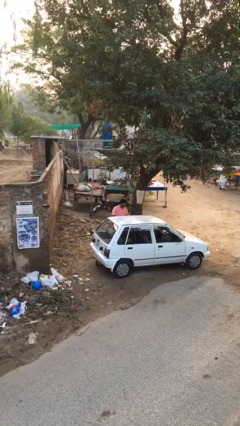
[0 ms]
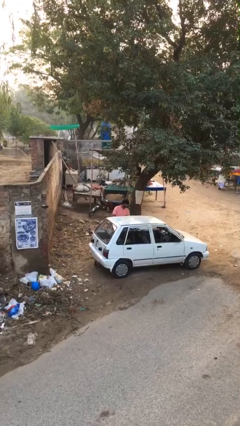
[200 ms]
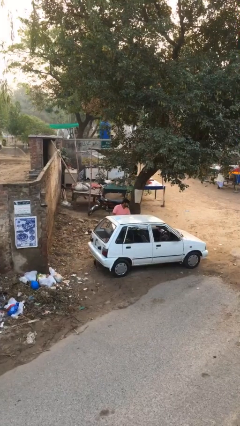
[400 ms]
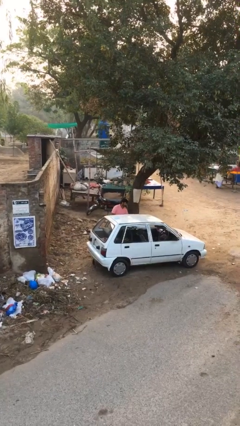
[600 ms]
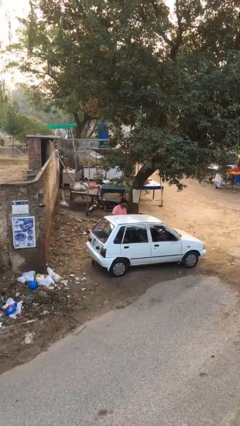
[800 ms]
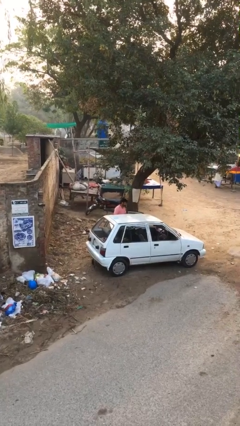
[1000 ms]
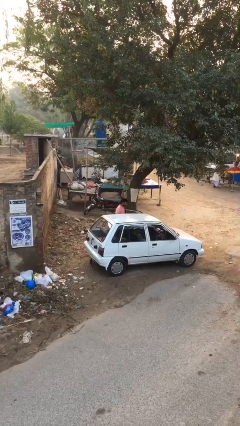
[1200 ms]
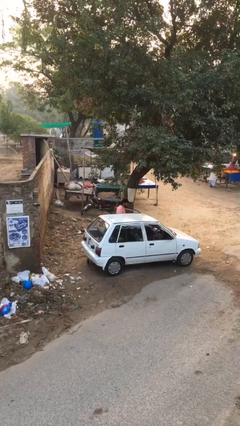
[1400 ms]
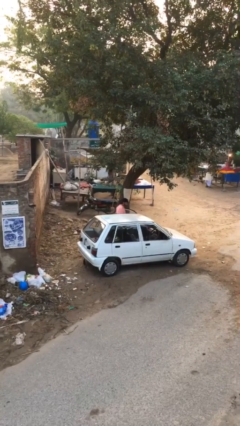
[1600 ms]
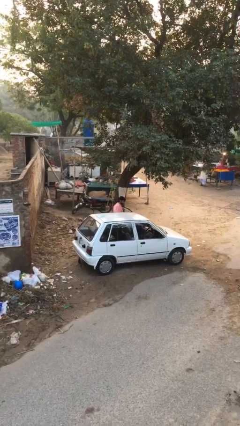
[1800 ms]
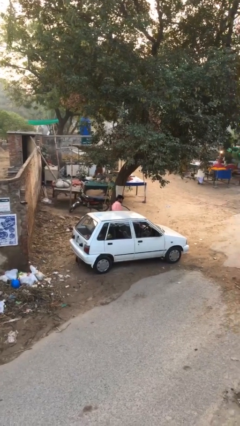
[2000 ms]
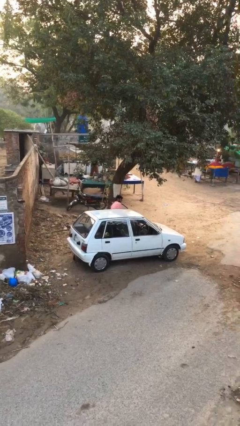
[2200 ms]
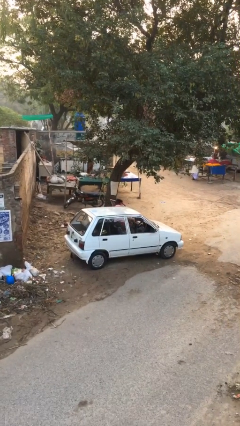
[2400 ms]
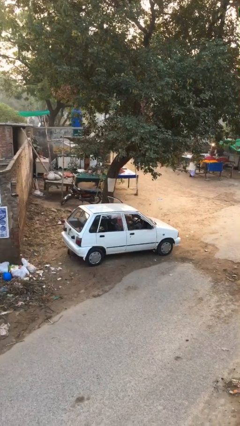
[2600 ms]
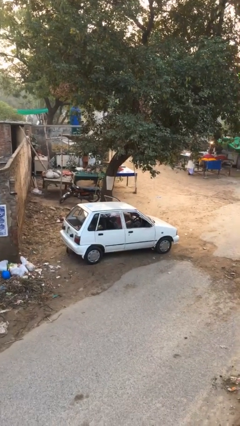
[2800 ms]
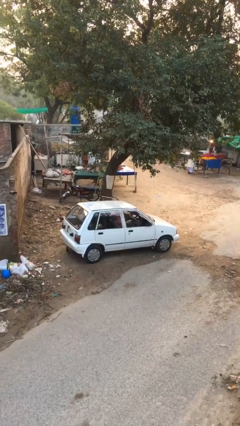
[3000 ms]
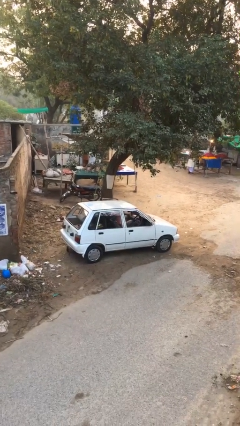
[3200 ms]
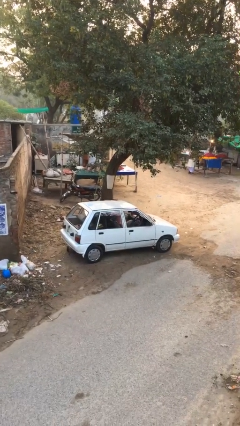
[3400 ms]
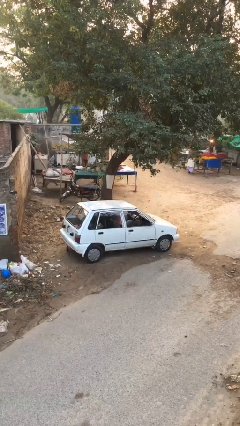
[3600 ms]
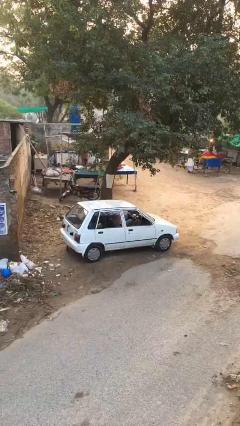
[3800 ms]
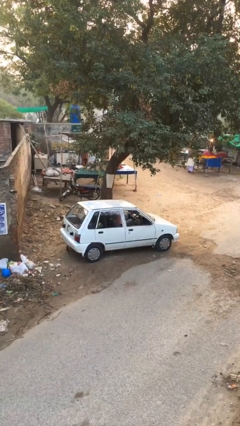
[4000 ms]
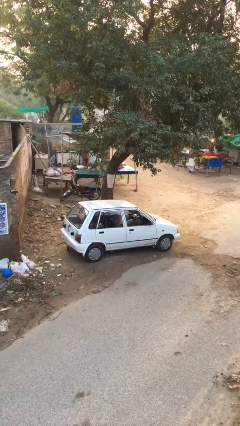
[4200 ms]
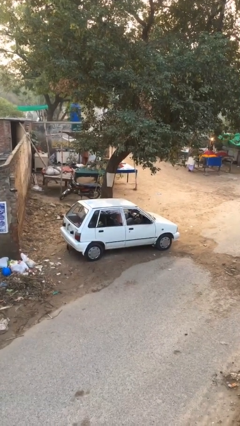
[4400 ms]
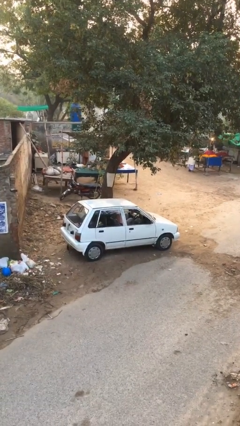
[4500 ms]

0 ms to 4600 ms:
person enters car

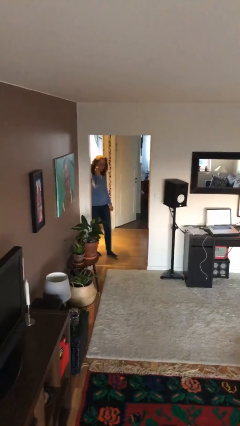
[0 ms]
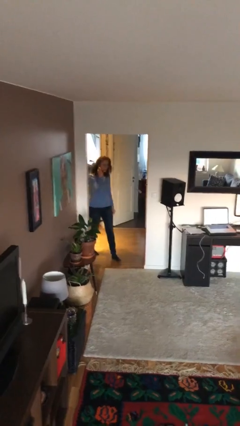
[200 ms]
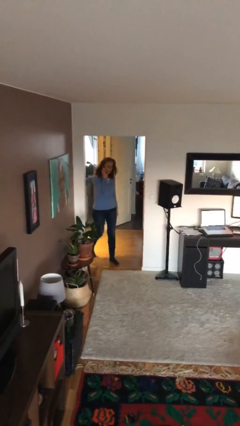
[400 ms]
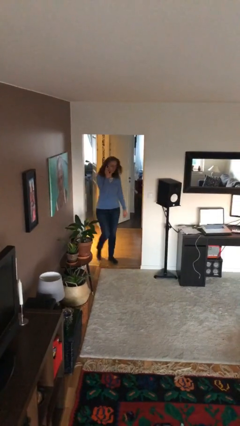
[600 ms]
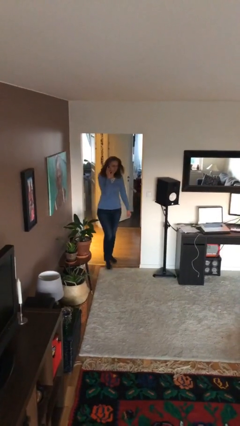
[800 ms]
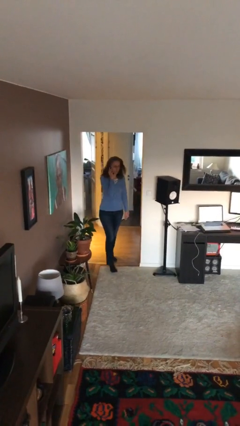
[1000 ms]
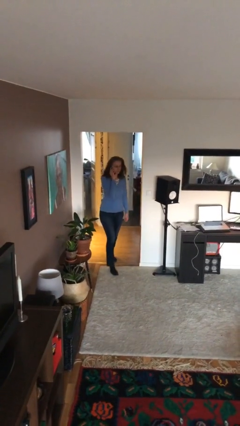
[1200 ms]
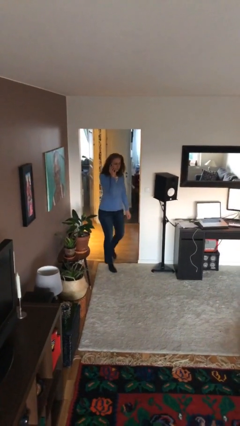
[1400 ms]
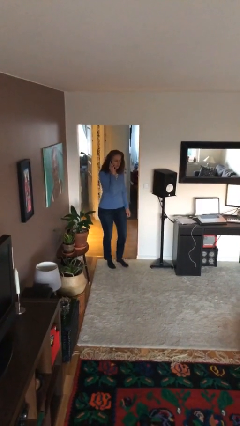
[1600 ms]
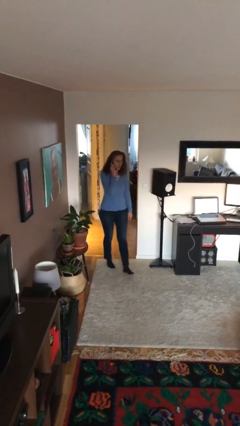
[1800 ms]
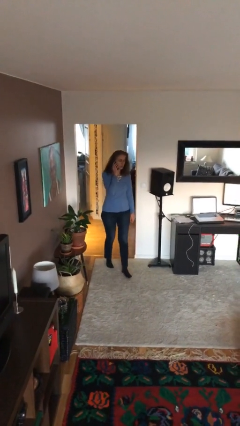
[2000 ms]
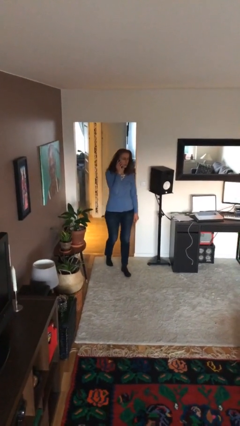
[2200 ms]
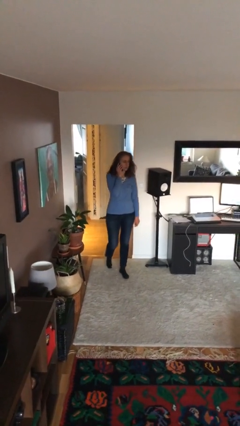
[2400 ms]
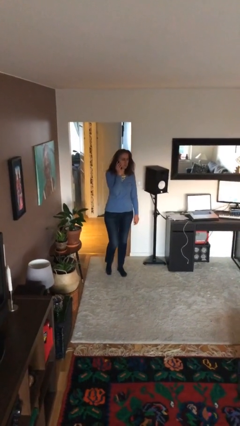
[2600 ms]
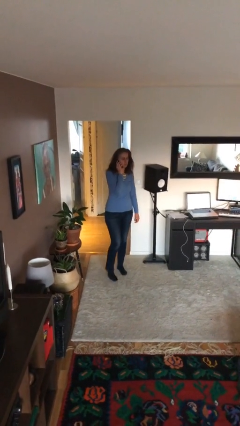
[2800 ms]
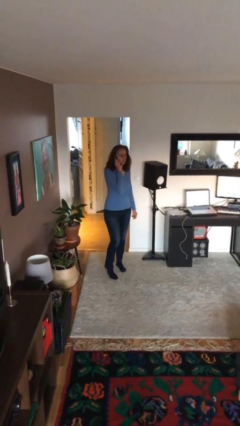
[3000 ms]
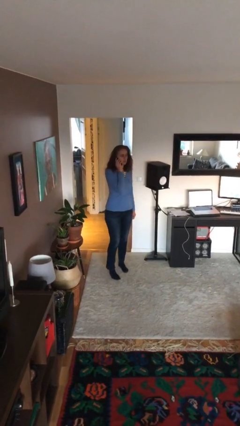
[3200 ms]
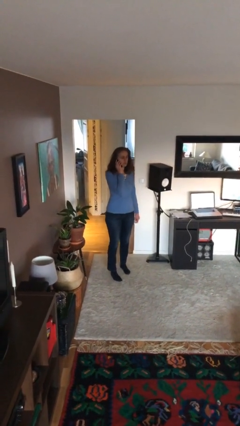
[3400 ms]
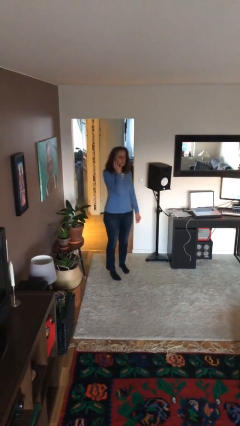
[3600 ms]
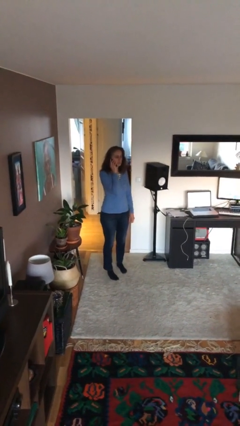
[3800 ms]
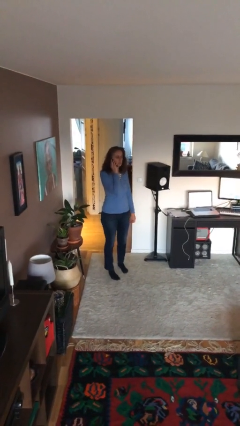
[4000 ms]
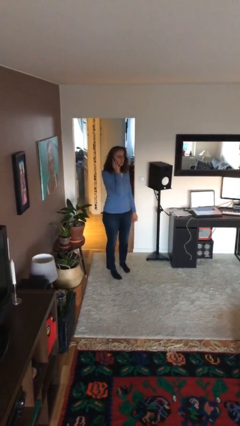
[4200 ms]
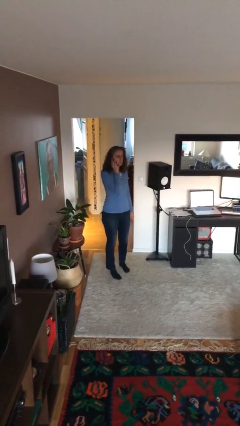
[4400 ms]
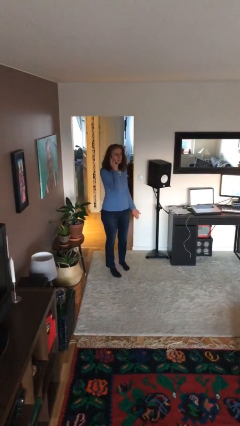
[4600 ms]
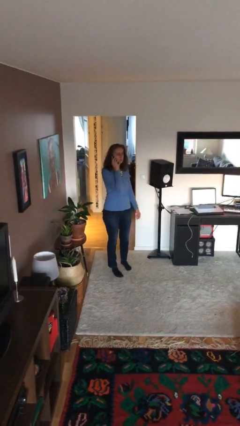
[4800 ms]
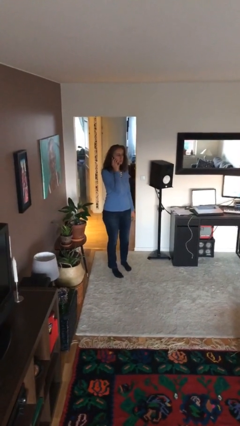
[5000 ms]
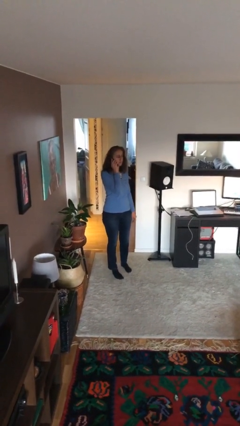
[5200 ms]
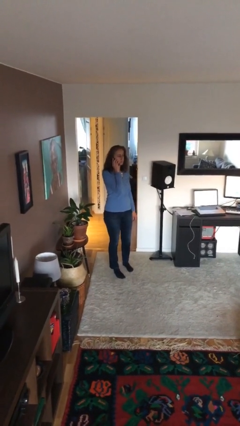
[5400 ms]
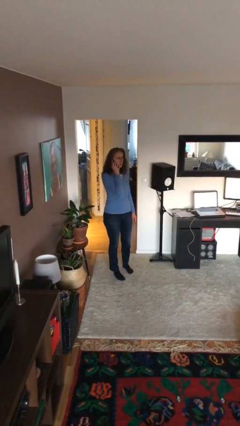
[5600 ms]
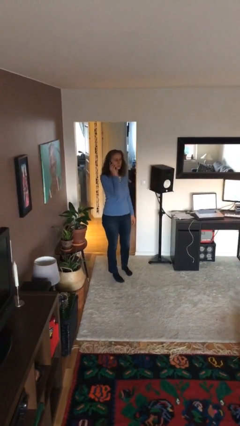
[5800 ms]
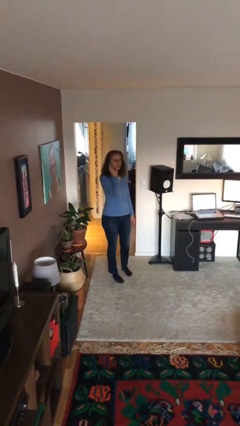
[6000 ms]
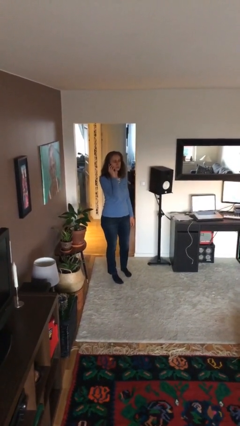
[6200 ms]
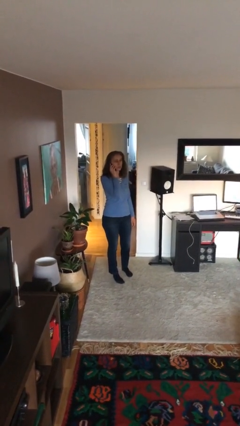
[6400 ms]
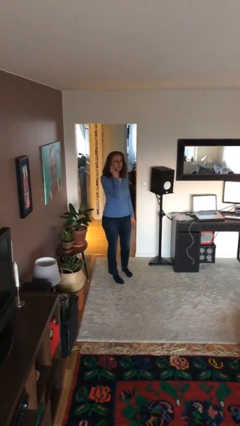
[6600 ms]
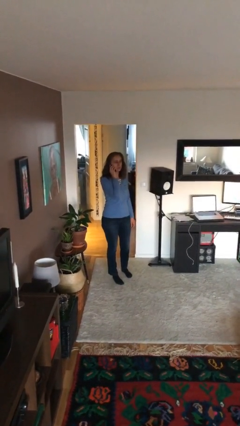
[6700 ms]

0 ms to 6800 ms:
person enters scene through structure

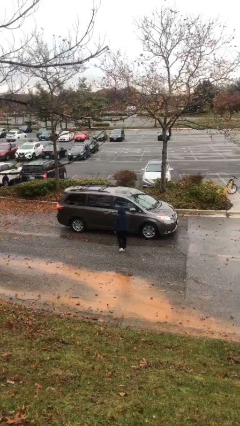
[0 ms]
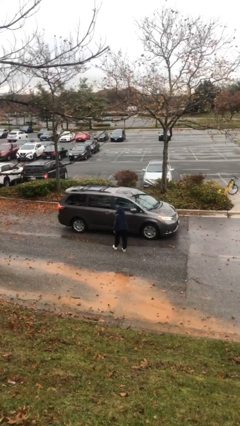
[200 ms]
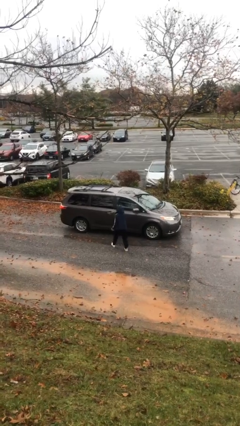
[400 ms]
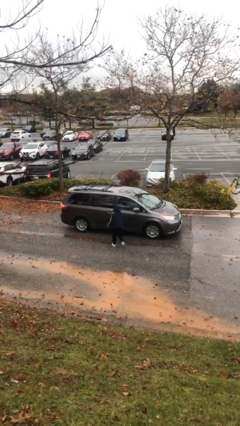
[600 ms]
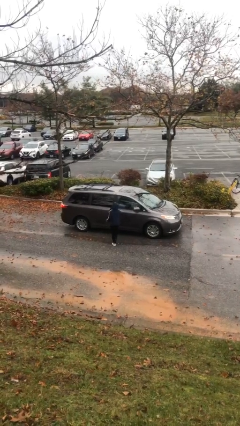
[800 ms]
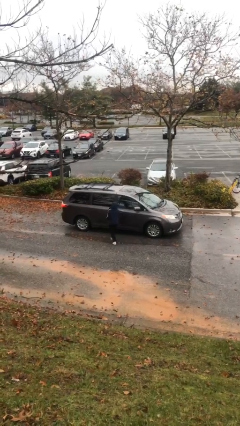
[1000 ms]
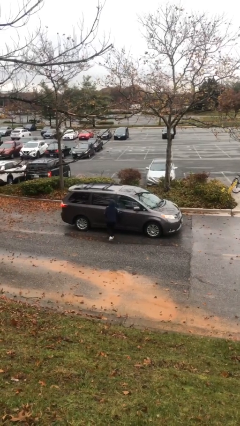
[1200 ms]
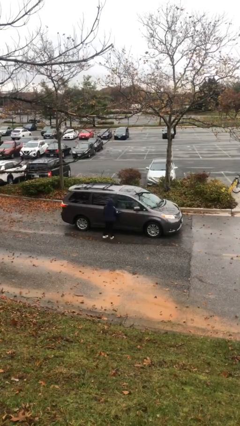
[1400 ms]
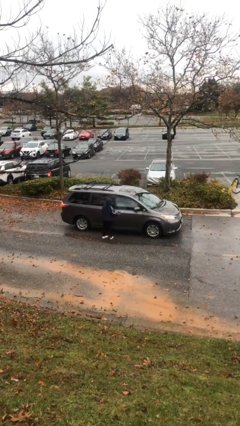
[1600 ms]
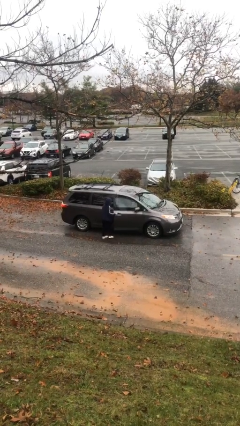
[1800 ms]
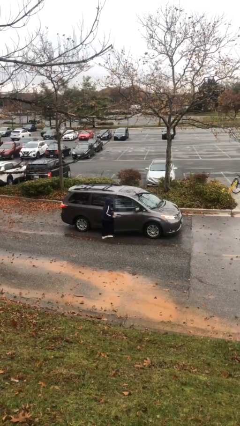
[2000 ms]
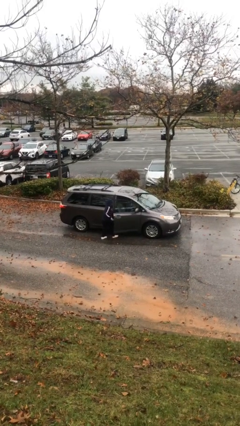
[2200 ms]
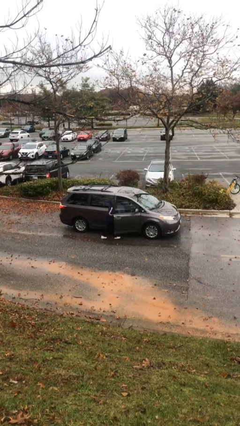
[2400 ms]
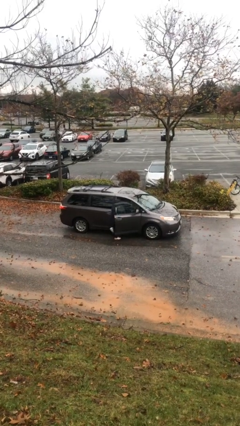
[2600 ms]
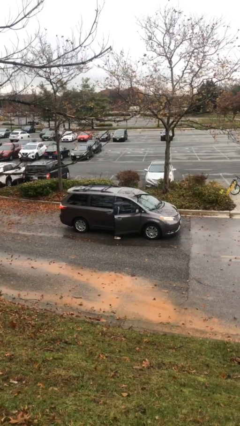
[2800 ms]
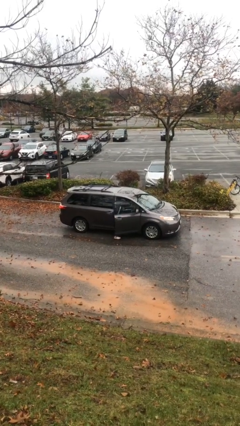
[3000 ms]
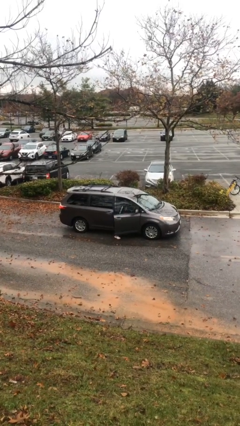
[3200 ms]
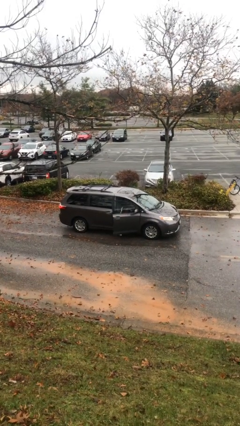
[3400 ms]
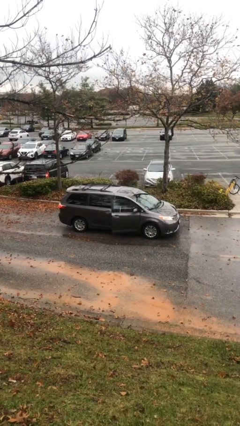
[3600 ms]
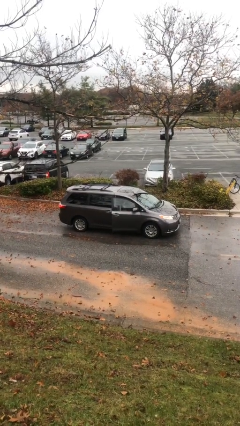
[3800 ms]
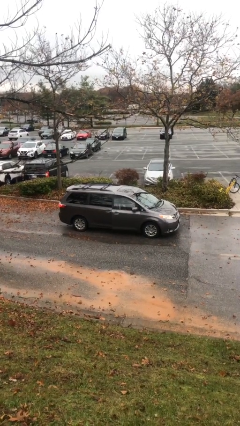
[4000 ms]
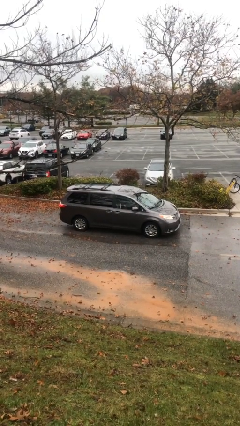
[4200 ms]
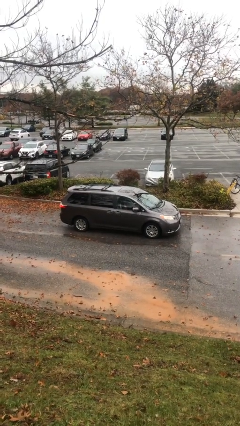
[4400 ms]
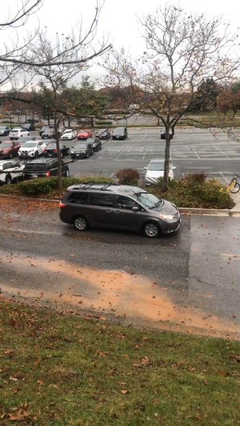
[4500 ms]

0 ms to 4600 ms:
car picks up person

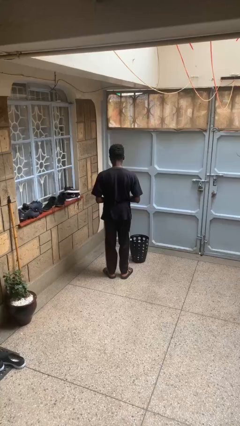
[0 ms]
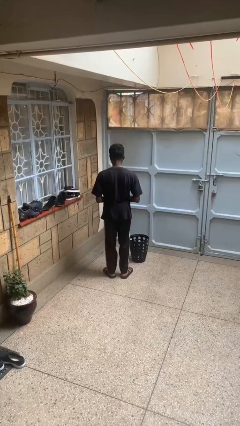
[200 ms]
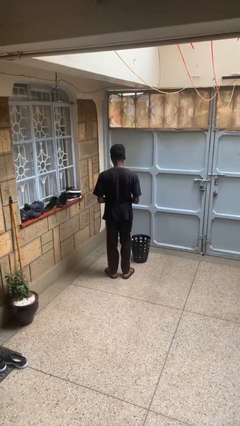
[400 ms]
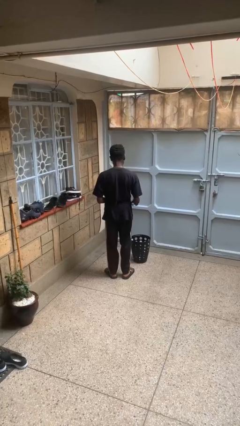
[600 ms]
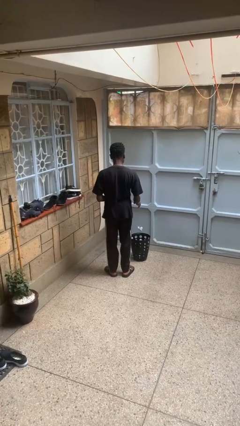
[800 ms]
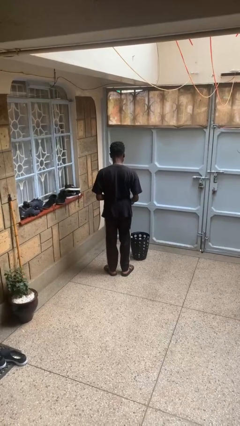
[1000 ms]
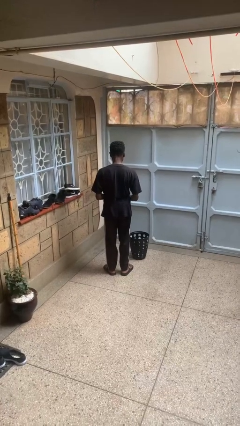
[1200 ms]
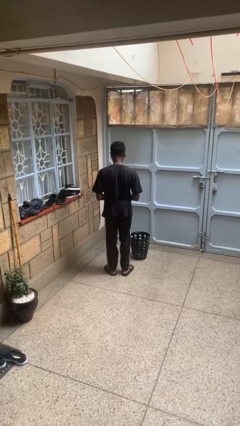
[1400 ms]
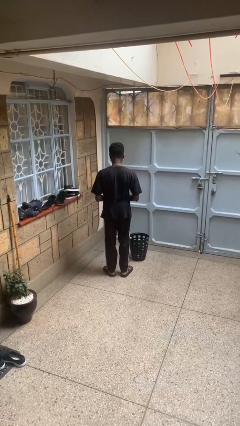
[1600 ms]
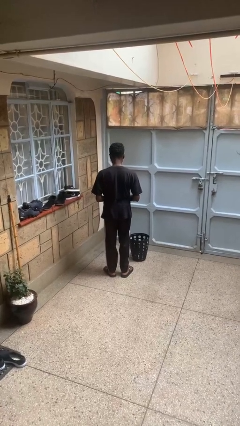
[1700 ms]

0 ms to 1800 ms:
person discards trash

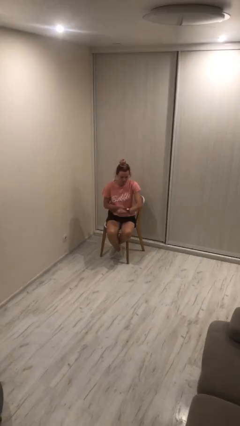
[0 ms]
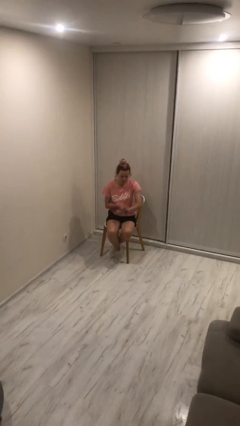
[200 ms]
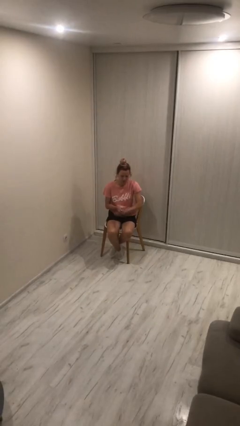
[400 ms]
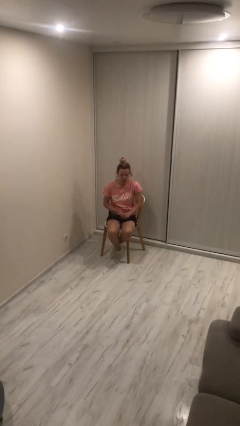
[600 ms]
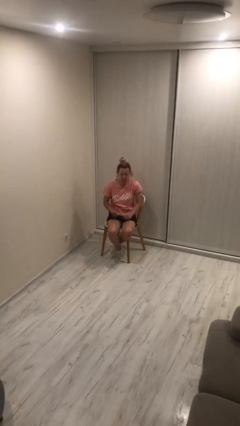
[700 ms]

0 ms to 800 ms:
person takes off wristwatch
